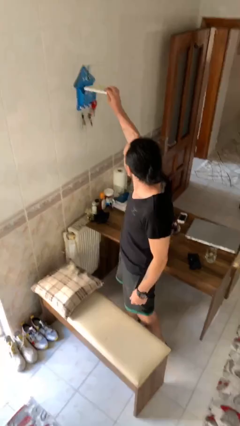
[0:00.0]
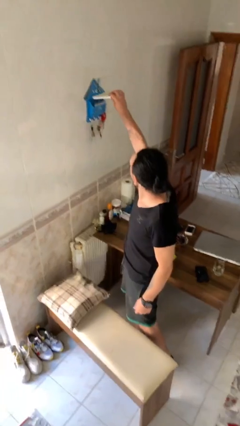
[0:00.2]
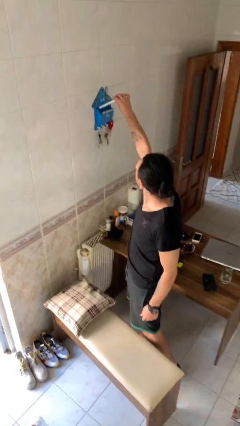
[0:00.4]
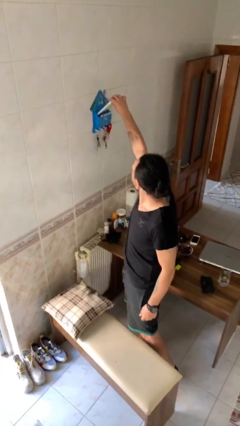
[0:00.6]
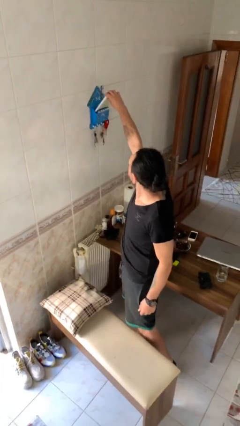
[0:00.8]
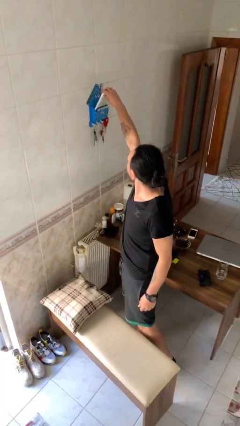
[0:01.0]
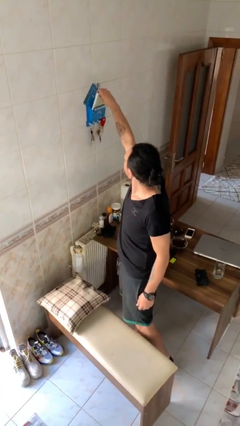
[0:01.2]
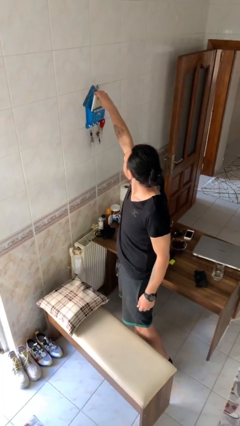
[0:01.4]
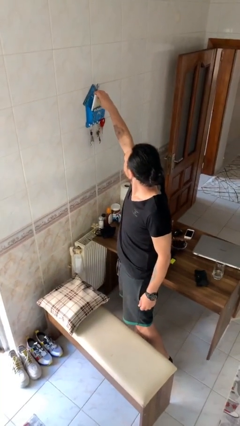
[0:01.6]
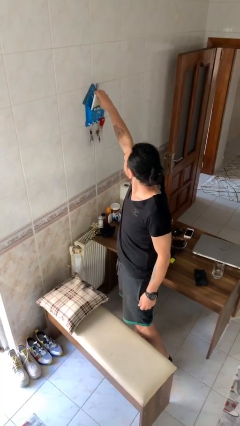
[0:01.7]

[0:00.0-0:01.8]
person puts down object on shelf

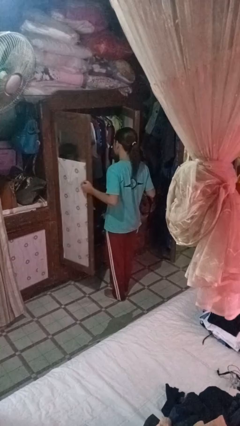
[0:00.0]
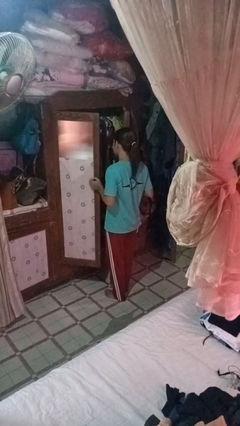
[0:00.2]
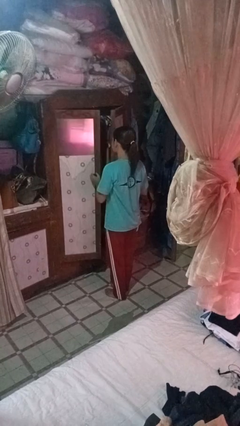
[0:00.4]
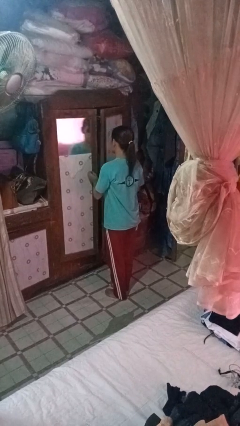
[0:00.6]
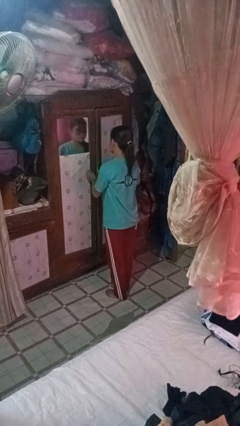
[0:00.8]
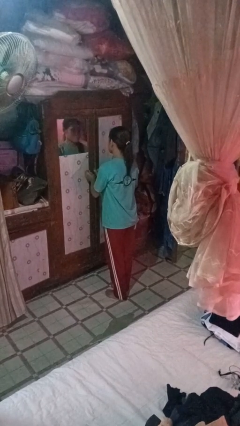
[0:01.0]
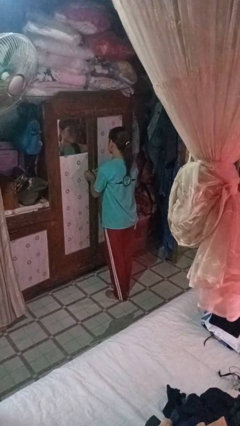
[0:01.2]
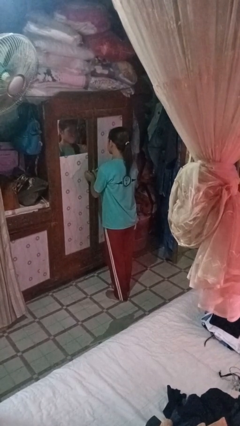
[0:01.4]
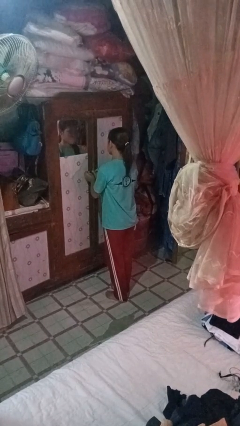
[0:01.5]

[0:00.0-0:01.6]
person closes closet door

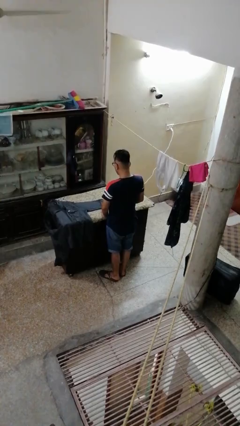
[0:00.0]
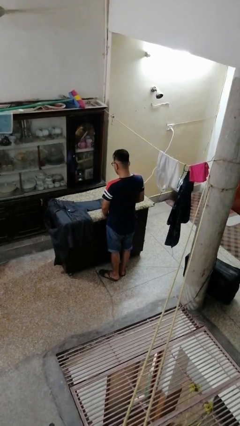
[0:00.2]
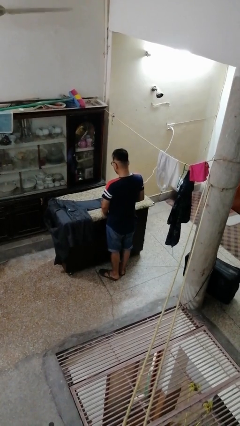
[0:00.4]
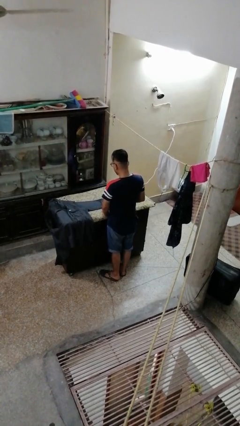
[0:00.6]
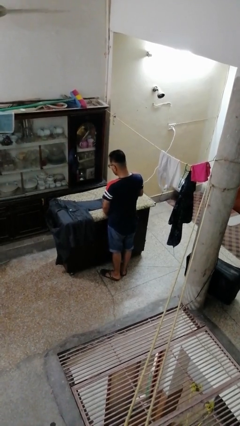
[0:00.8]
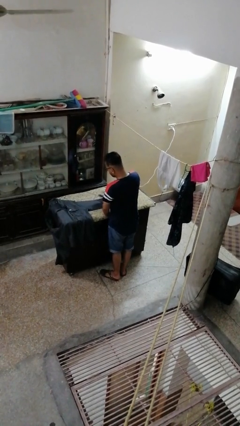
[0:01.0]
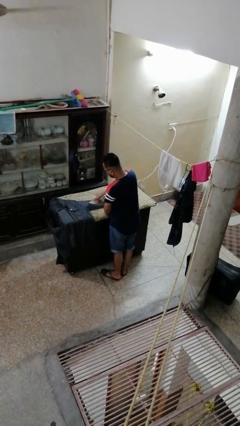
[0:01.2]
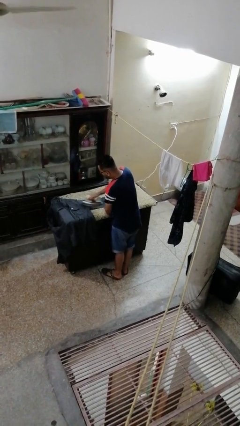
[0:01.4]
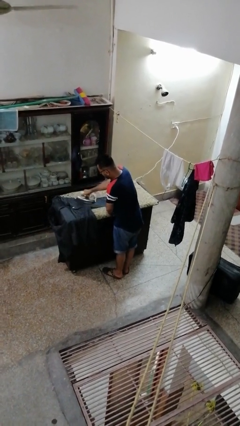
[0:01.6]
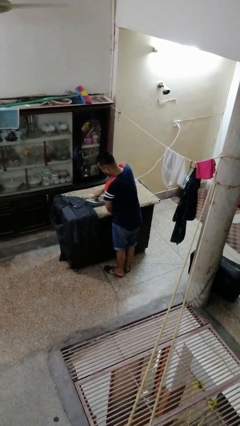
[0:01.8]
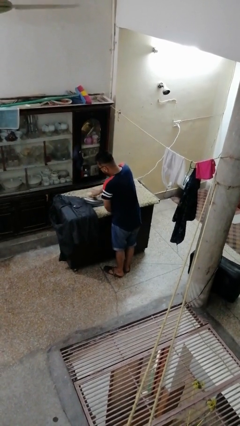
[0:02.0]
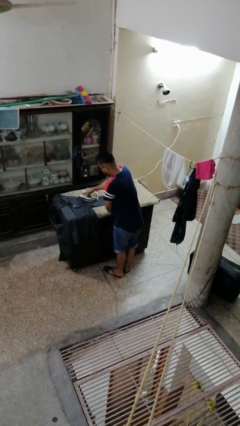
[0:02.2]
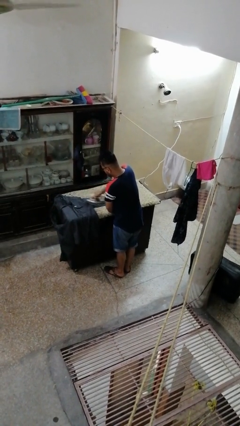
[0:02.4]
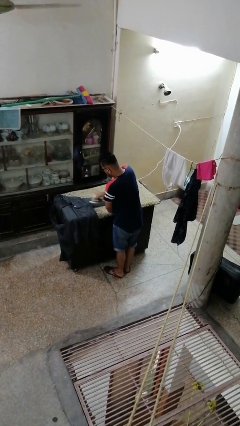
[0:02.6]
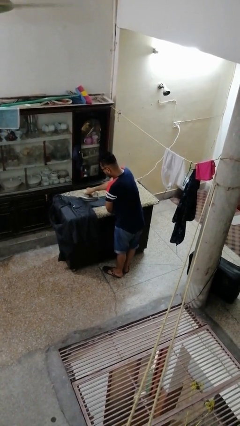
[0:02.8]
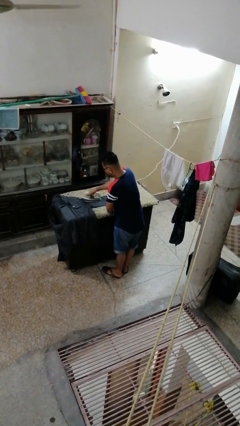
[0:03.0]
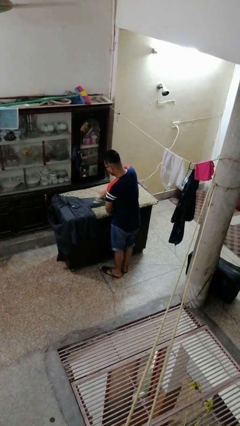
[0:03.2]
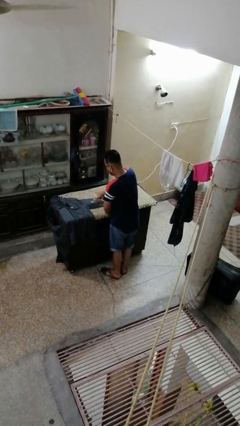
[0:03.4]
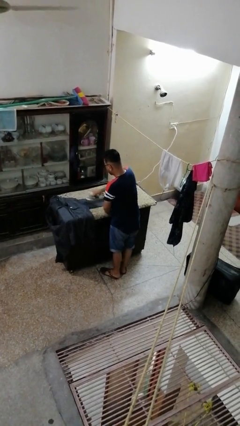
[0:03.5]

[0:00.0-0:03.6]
person irons clothes

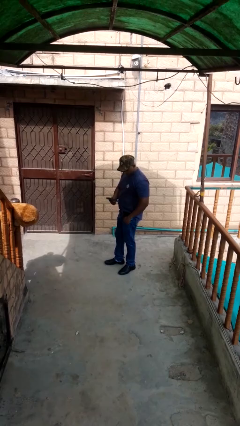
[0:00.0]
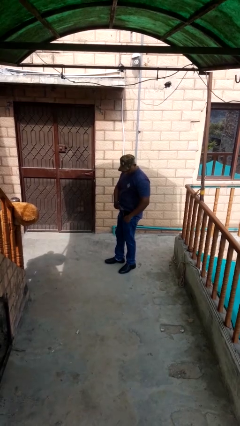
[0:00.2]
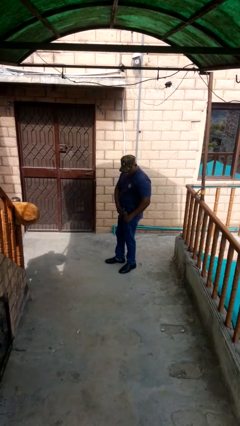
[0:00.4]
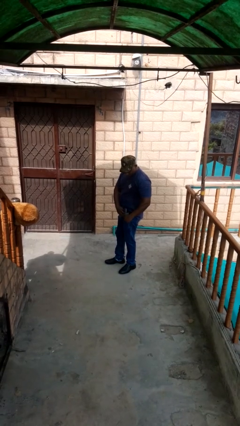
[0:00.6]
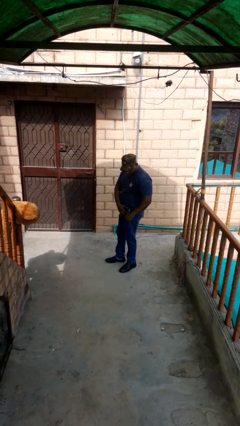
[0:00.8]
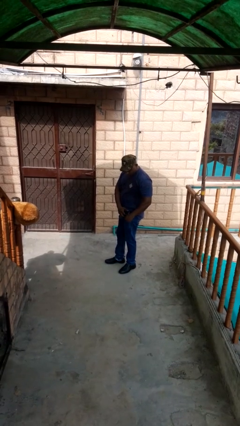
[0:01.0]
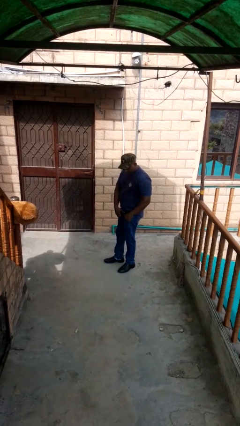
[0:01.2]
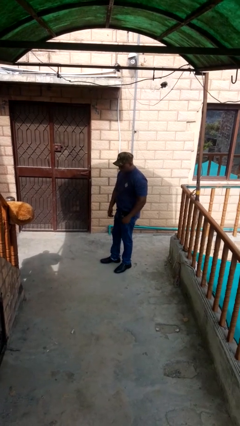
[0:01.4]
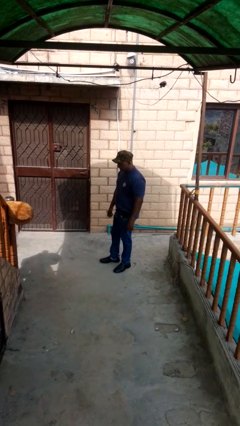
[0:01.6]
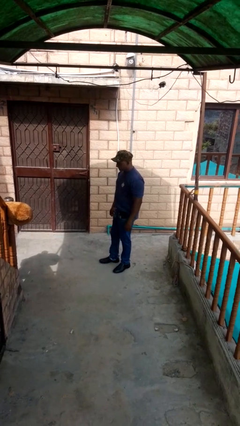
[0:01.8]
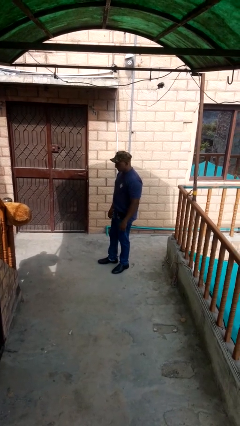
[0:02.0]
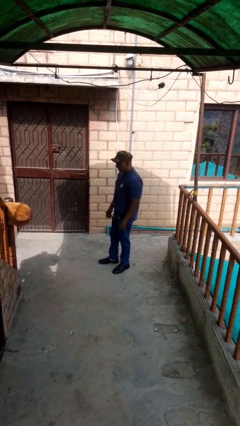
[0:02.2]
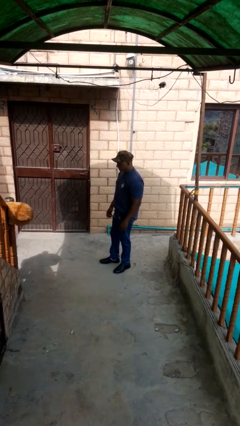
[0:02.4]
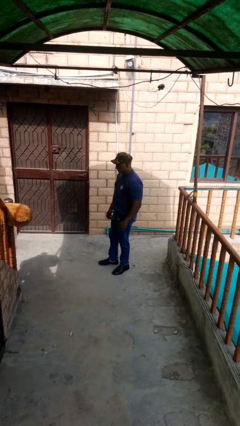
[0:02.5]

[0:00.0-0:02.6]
person puts phone into pocket

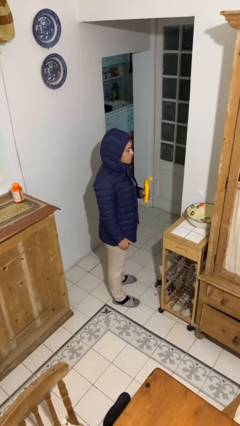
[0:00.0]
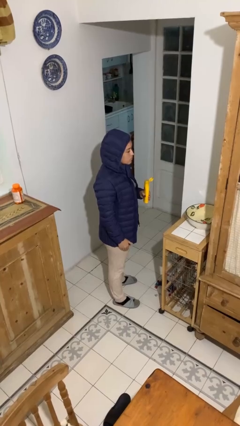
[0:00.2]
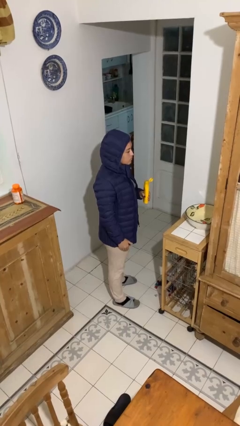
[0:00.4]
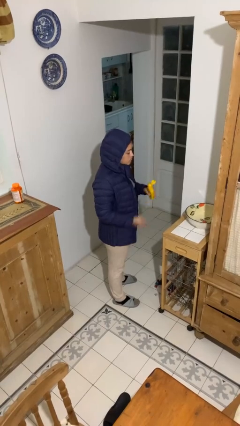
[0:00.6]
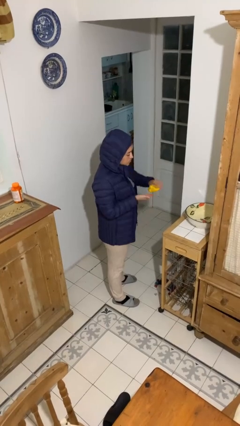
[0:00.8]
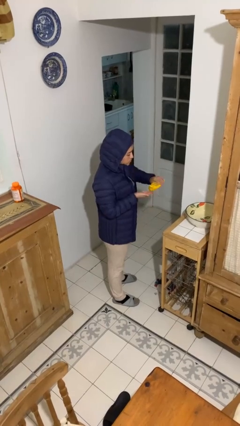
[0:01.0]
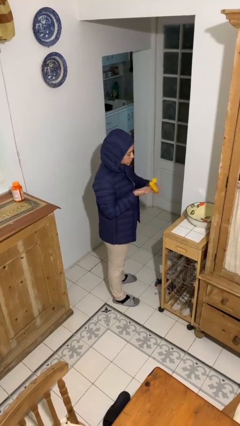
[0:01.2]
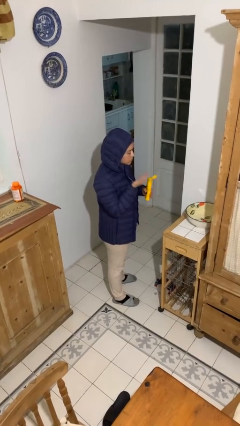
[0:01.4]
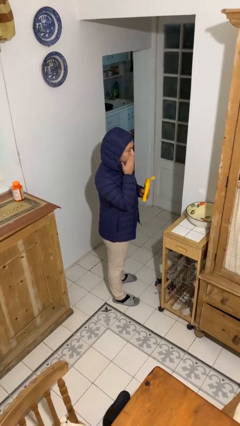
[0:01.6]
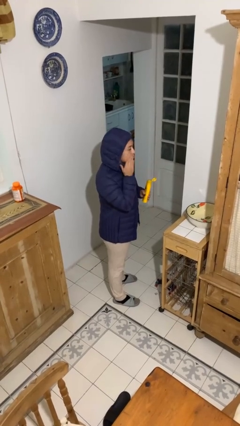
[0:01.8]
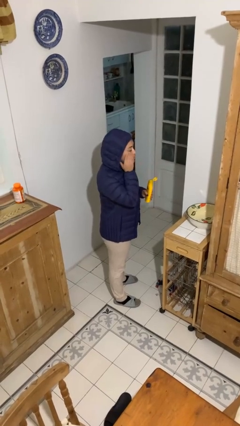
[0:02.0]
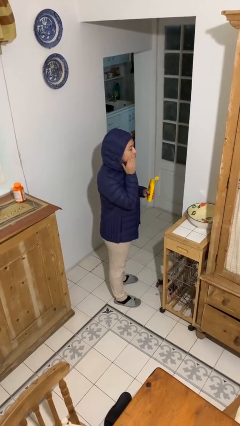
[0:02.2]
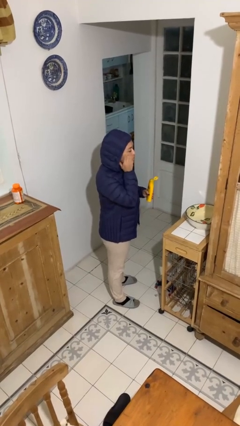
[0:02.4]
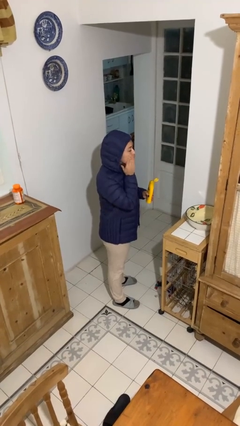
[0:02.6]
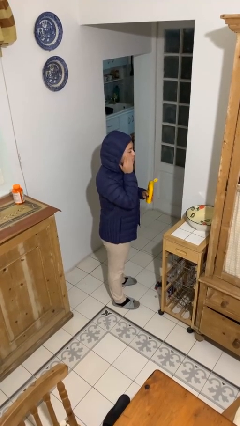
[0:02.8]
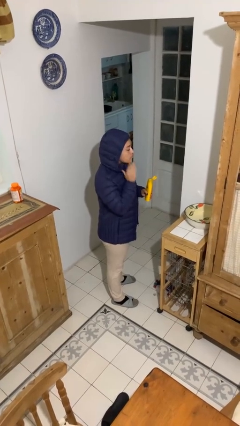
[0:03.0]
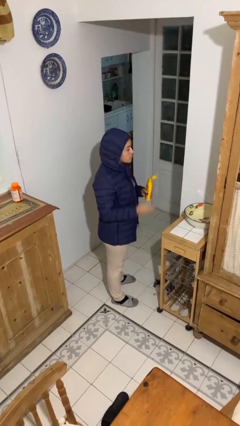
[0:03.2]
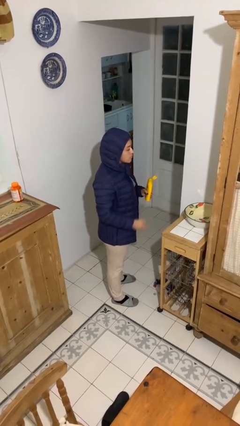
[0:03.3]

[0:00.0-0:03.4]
person applies sunscreen

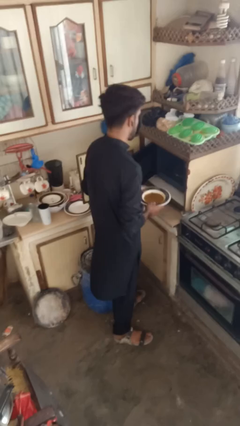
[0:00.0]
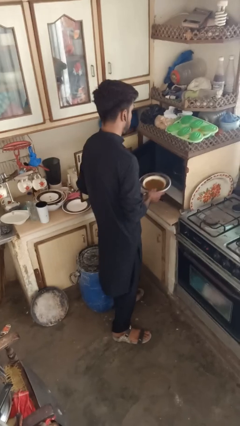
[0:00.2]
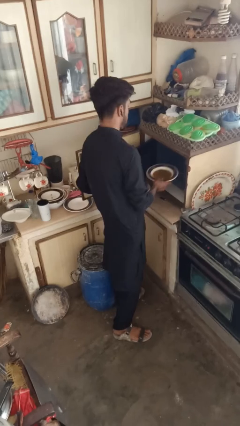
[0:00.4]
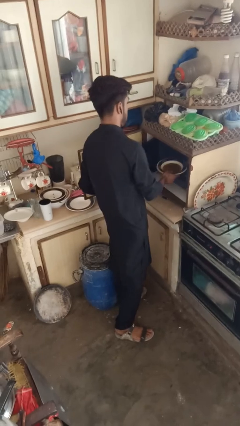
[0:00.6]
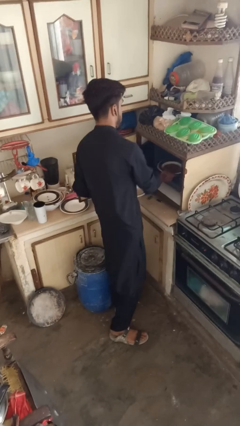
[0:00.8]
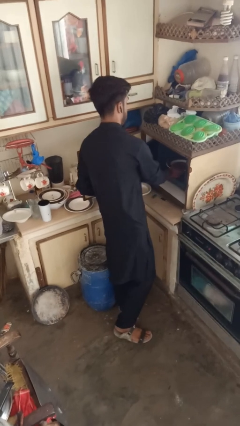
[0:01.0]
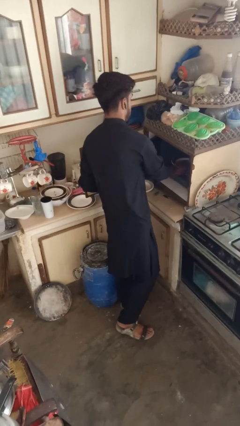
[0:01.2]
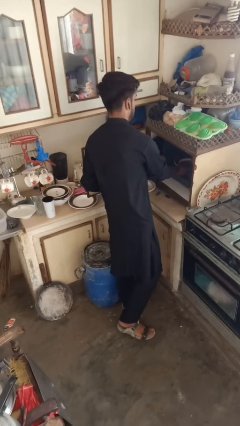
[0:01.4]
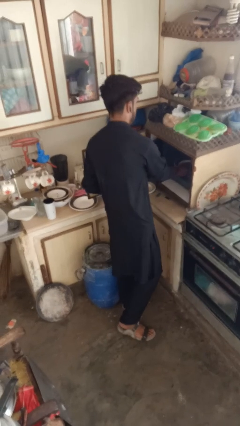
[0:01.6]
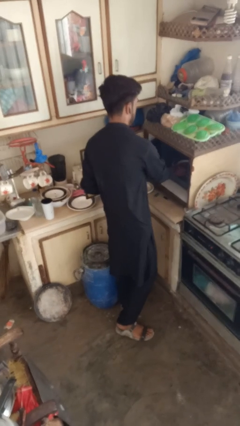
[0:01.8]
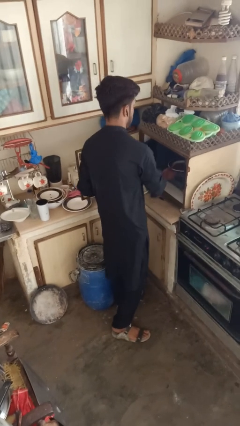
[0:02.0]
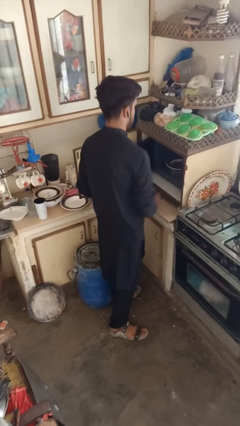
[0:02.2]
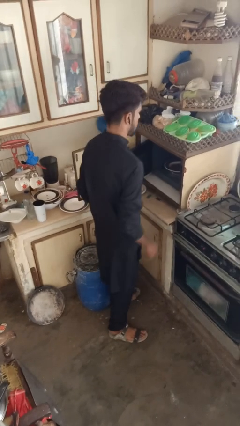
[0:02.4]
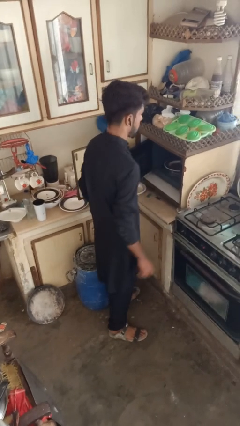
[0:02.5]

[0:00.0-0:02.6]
person puts object into microwave

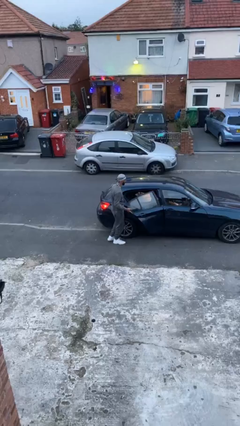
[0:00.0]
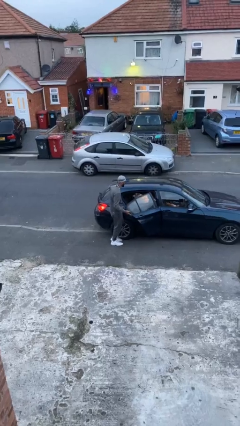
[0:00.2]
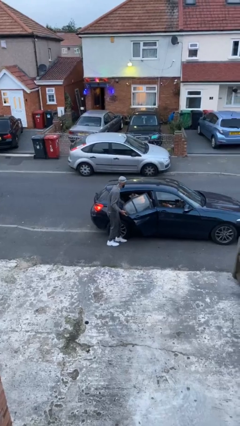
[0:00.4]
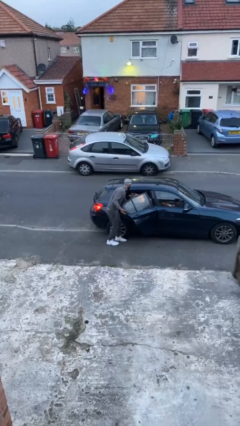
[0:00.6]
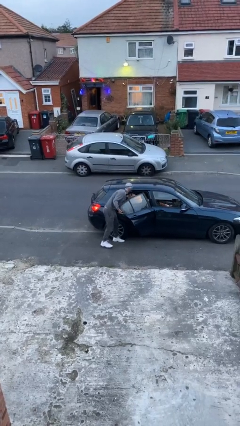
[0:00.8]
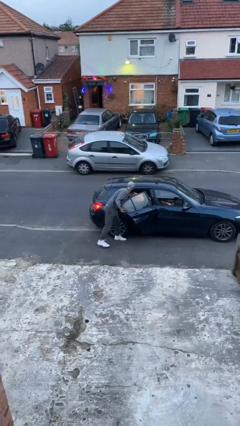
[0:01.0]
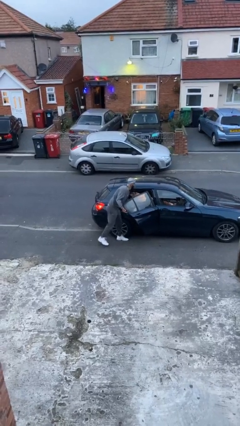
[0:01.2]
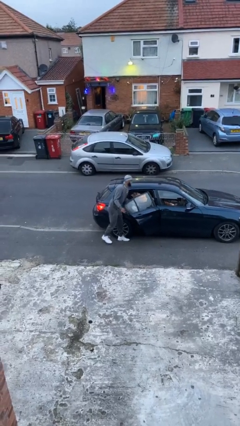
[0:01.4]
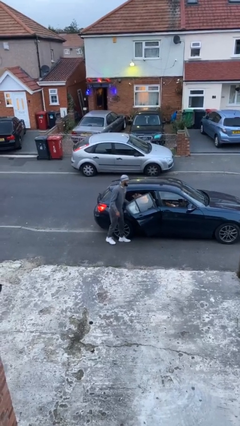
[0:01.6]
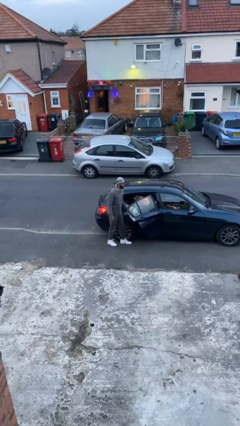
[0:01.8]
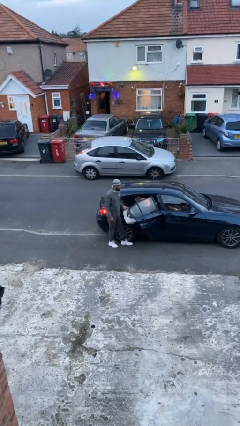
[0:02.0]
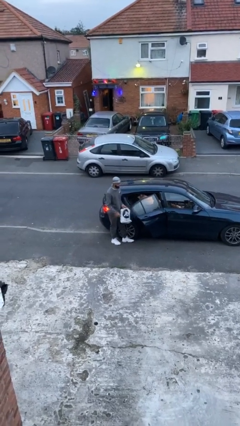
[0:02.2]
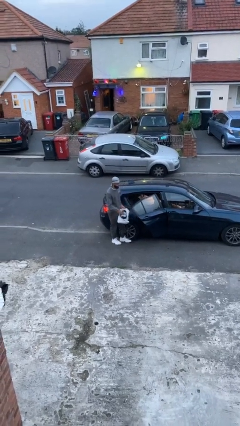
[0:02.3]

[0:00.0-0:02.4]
person unloads car
